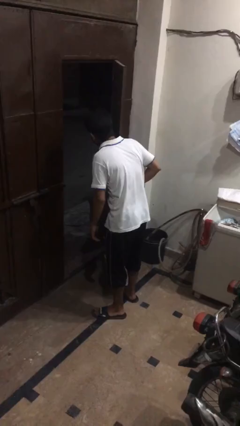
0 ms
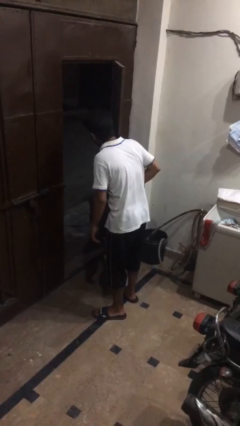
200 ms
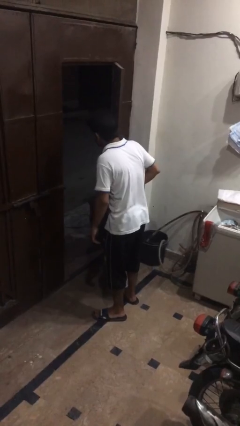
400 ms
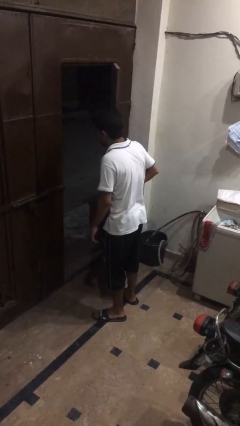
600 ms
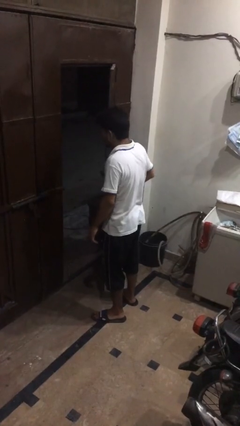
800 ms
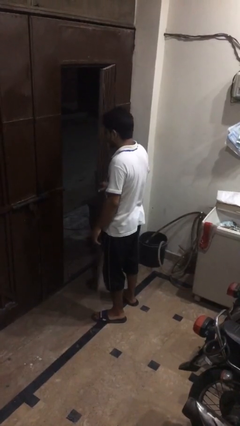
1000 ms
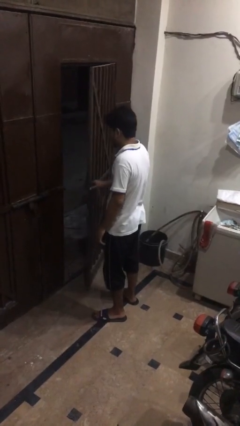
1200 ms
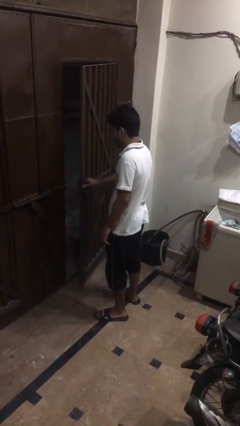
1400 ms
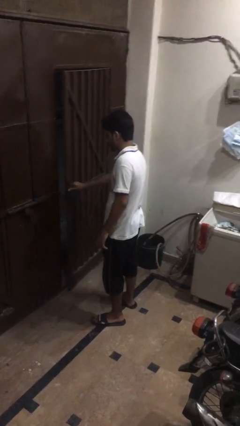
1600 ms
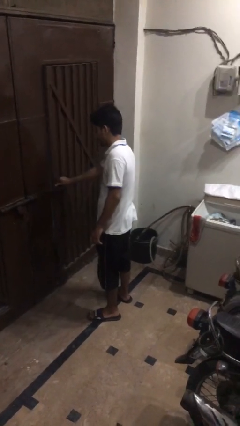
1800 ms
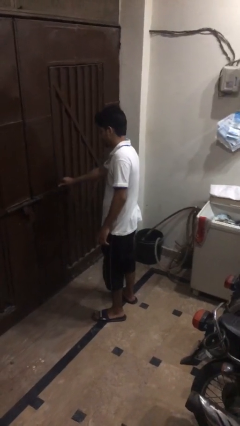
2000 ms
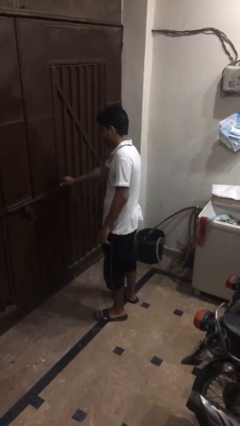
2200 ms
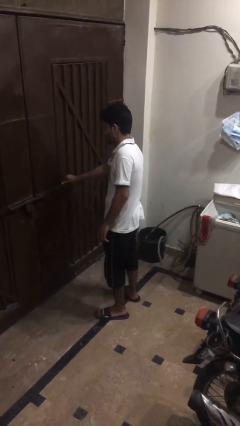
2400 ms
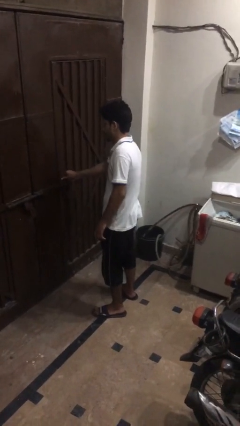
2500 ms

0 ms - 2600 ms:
person closes gate

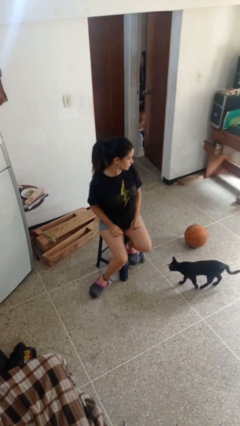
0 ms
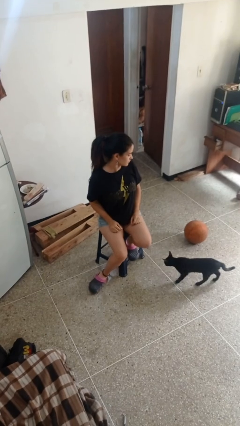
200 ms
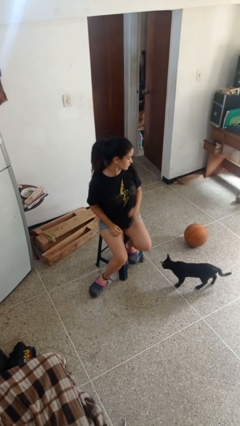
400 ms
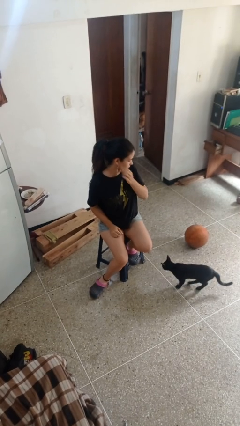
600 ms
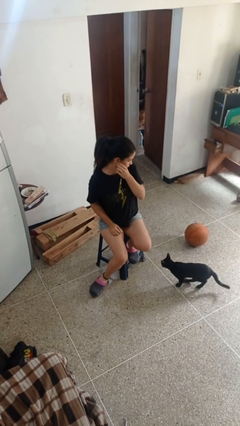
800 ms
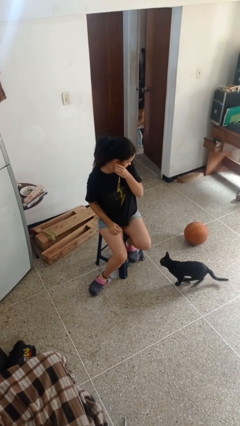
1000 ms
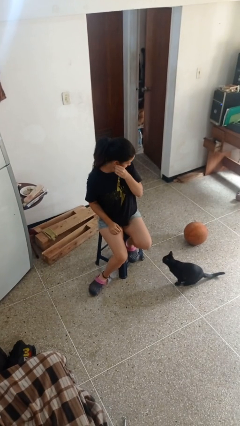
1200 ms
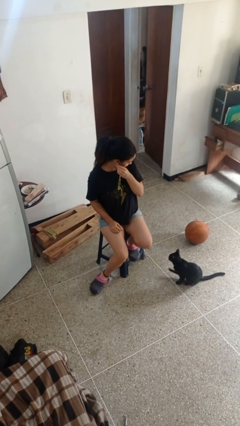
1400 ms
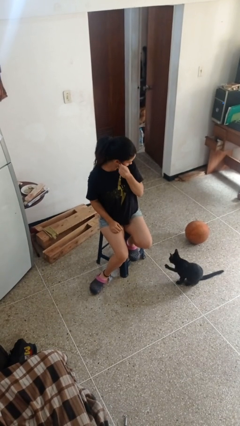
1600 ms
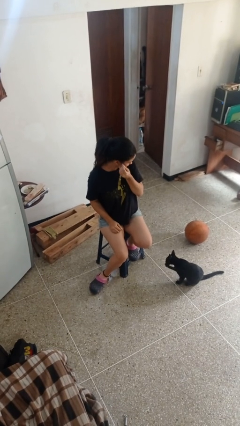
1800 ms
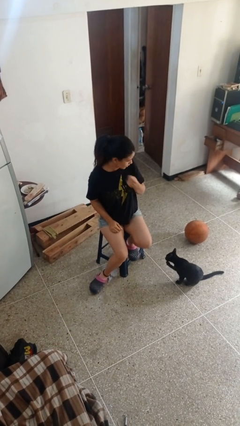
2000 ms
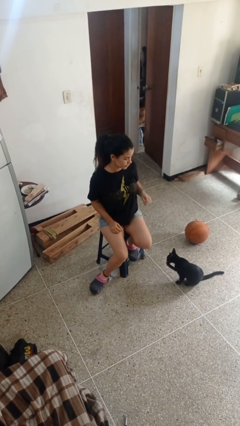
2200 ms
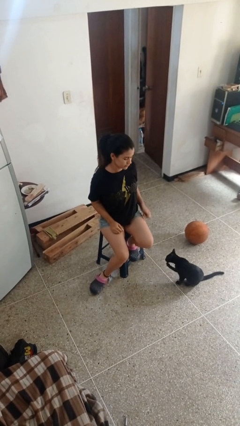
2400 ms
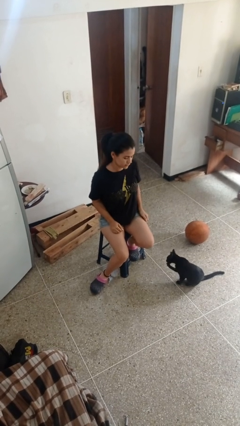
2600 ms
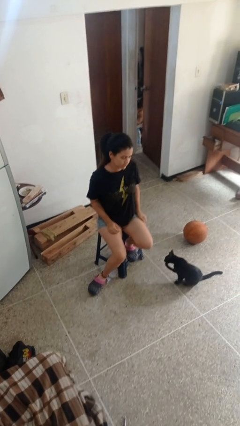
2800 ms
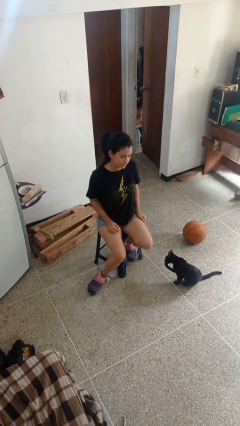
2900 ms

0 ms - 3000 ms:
person takes off earrings

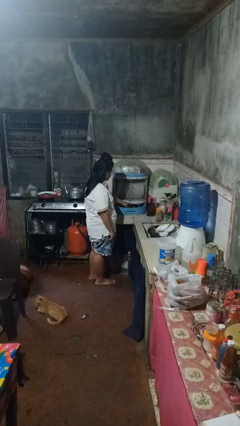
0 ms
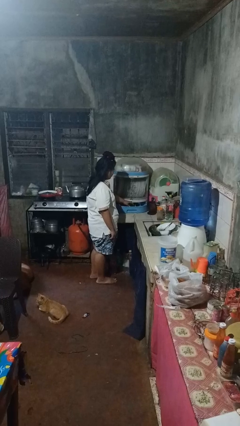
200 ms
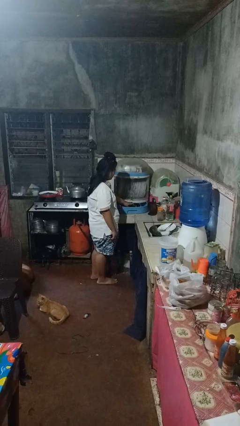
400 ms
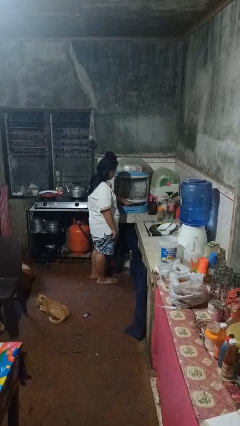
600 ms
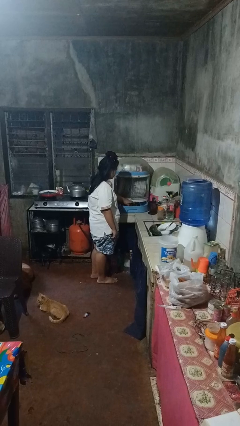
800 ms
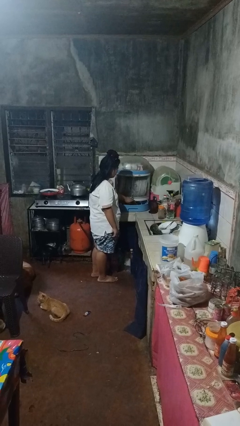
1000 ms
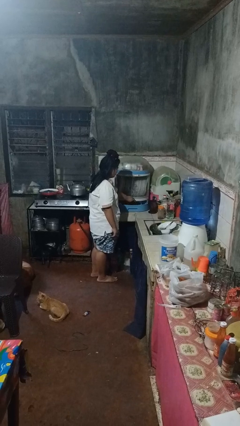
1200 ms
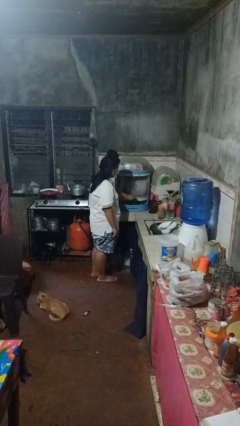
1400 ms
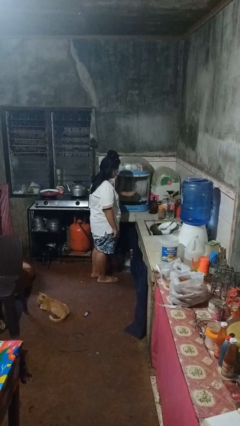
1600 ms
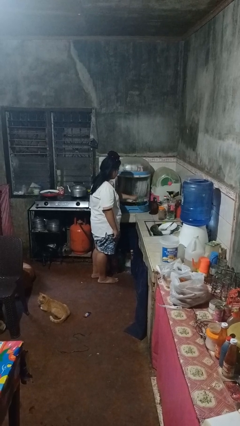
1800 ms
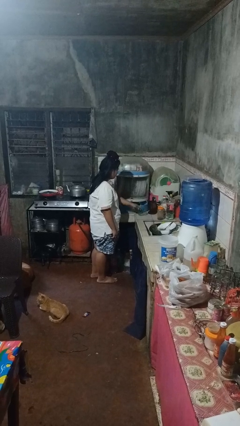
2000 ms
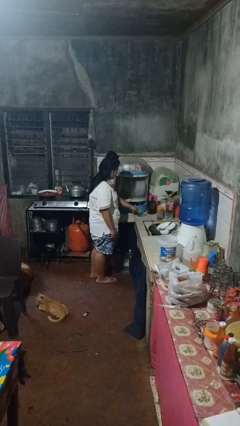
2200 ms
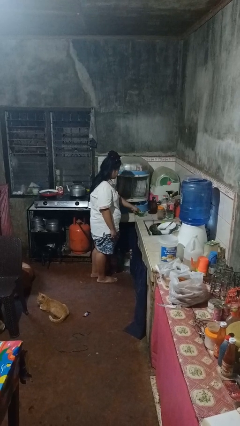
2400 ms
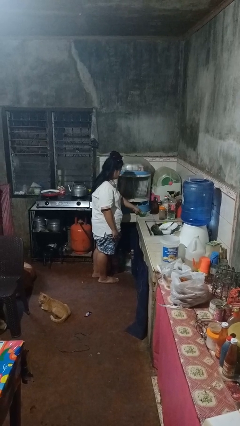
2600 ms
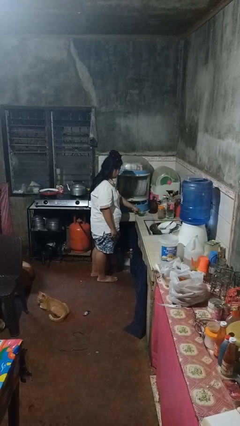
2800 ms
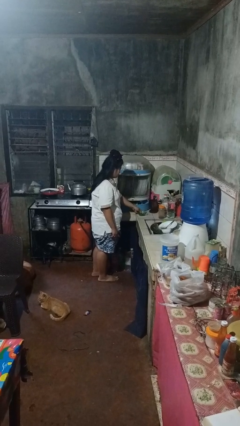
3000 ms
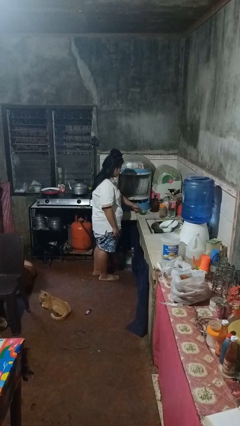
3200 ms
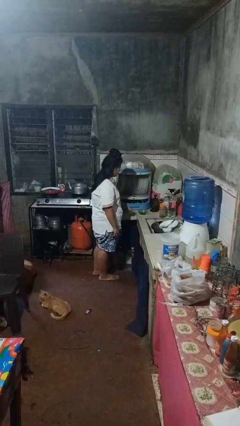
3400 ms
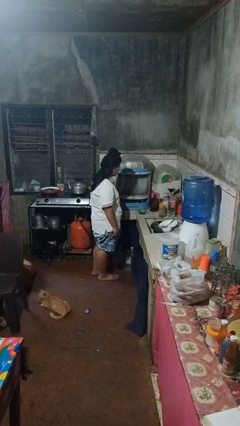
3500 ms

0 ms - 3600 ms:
person takes object from kitchen drawer

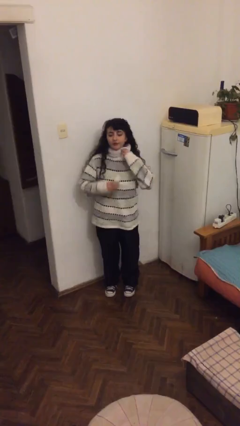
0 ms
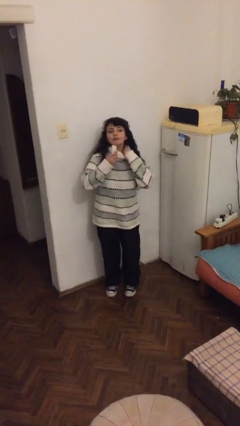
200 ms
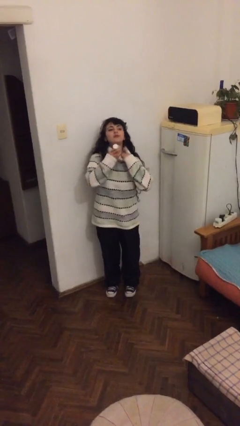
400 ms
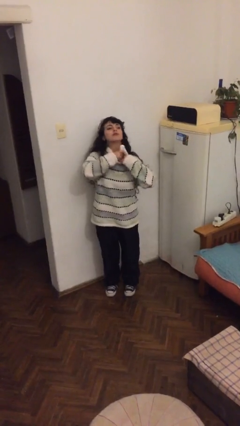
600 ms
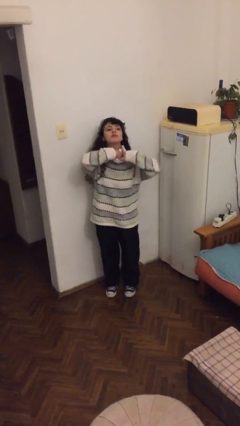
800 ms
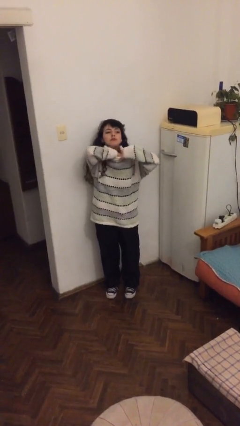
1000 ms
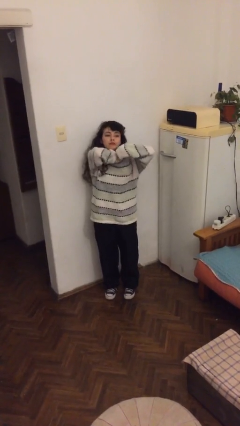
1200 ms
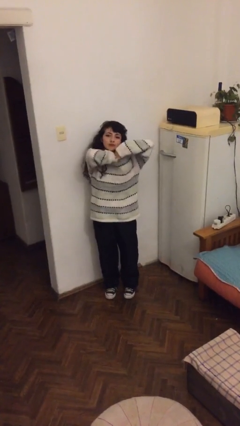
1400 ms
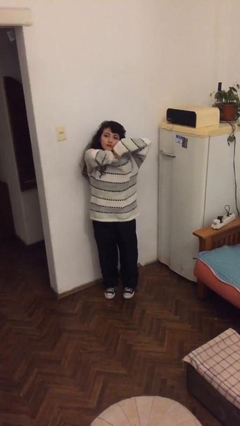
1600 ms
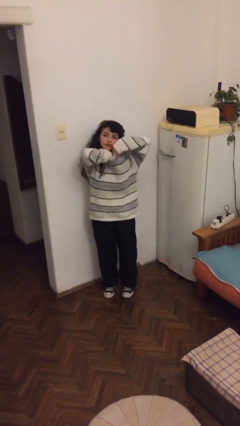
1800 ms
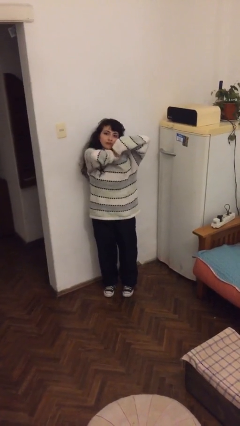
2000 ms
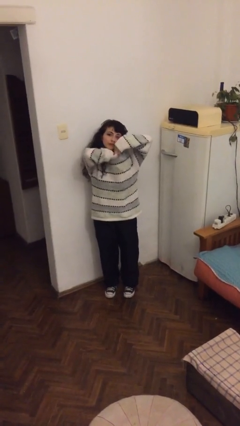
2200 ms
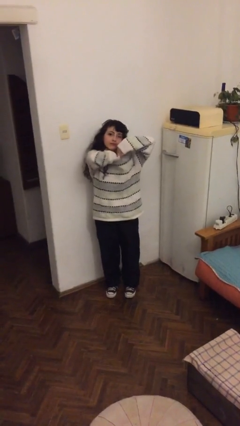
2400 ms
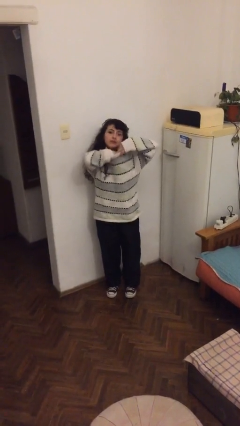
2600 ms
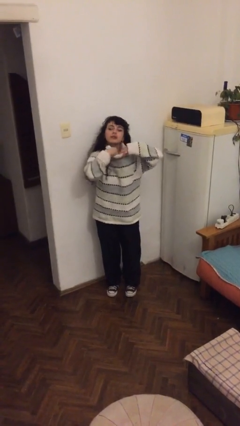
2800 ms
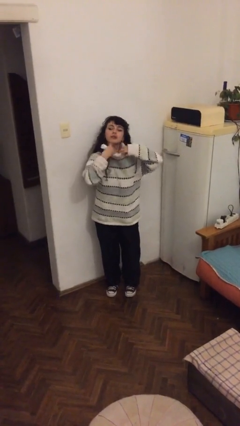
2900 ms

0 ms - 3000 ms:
person applies deodorant

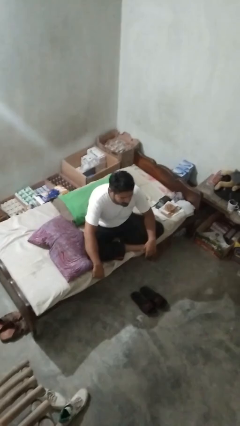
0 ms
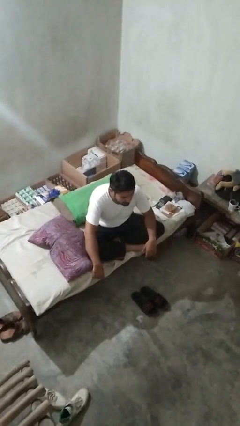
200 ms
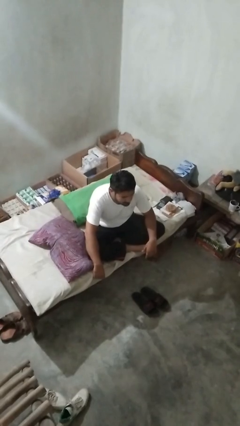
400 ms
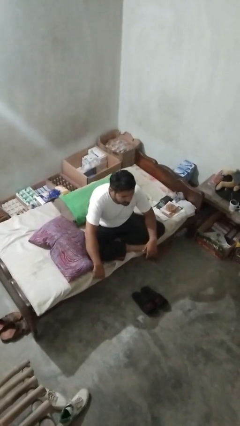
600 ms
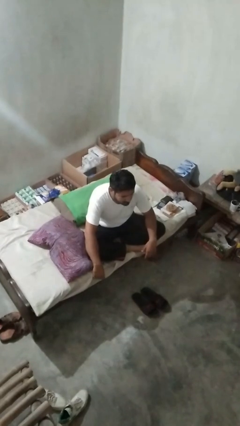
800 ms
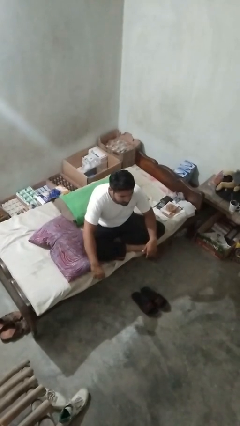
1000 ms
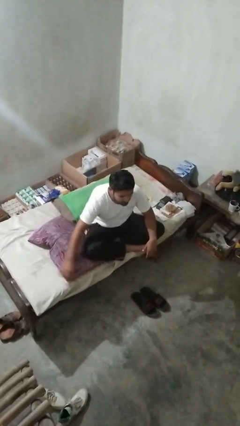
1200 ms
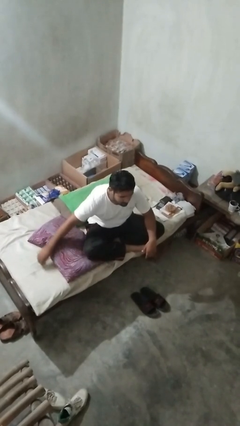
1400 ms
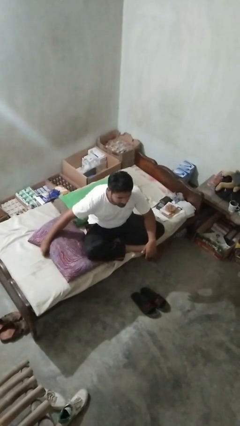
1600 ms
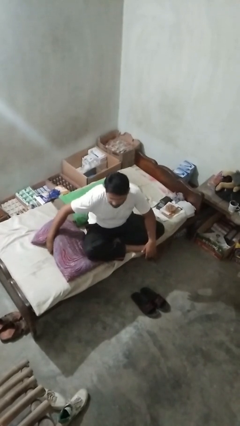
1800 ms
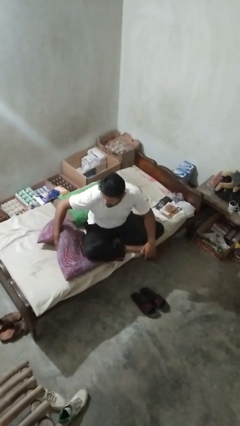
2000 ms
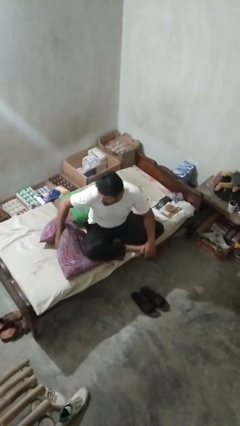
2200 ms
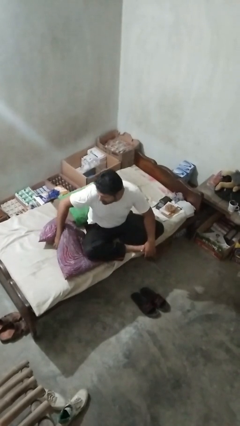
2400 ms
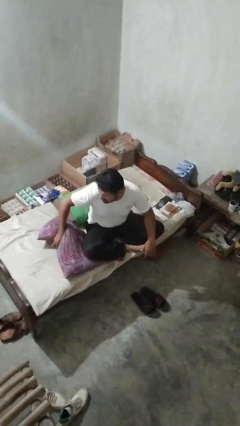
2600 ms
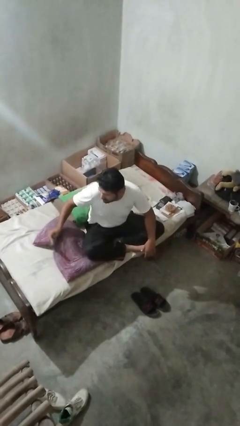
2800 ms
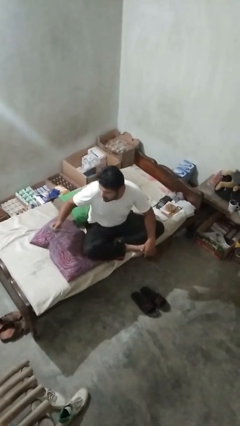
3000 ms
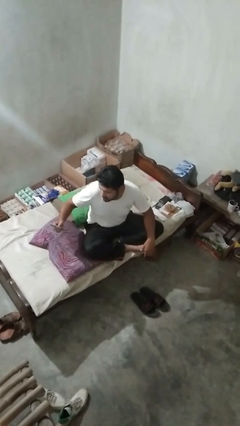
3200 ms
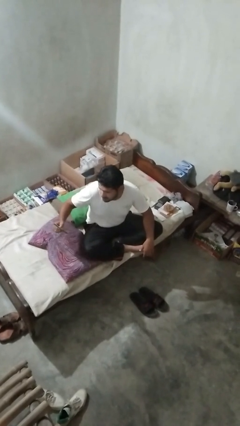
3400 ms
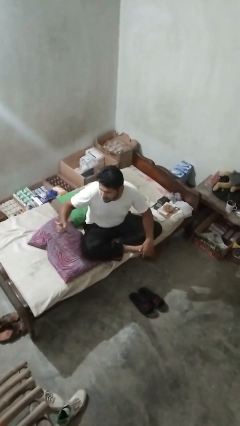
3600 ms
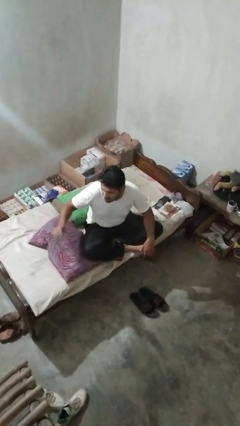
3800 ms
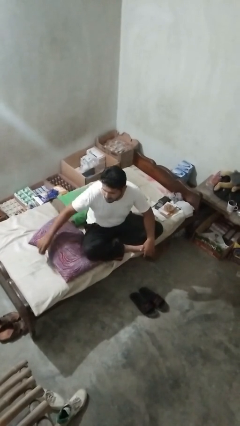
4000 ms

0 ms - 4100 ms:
person searches in couch

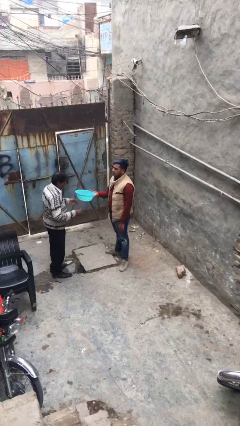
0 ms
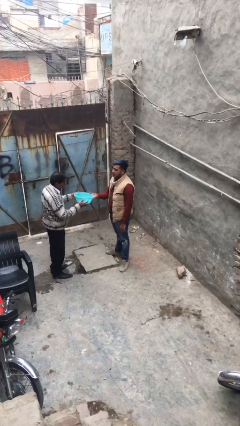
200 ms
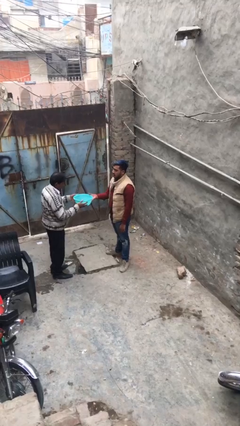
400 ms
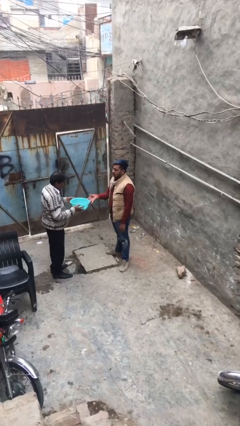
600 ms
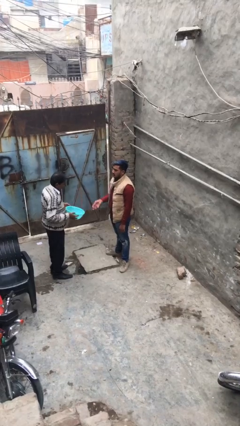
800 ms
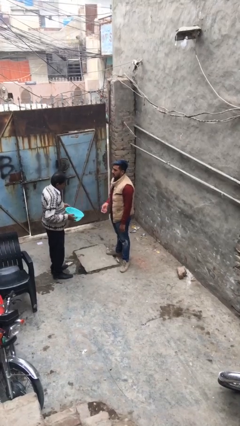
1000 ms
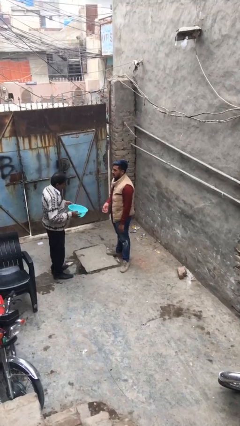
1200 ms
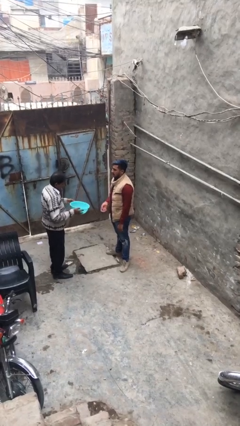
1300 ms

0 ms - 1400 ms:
person transfers object to person
